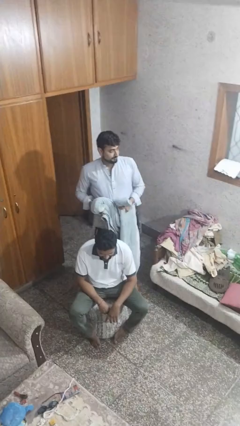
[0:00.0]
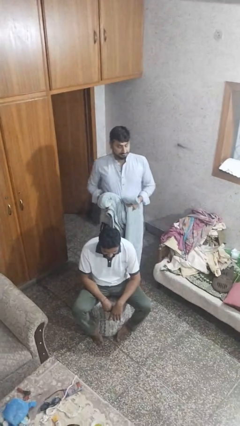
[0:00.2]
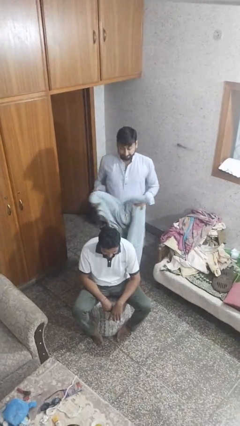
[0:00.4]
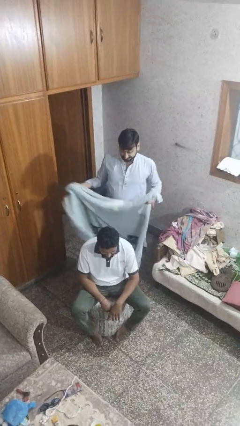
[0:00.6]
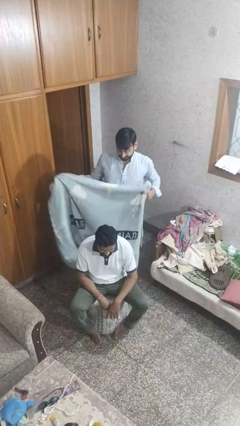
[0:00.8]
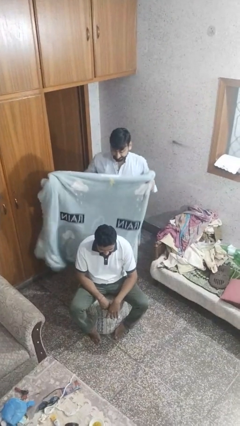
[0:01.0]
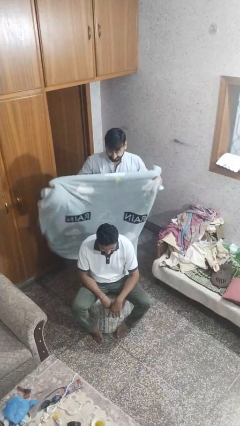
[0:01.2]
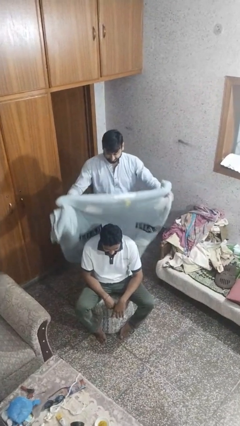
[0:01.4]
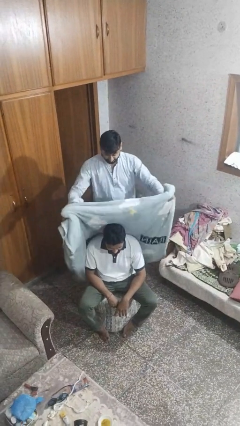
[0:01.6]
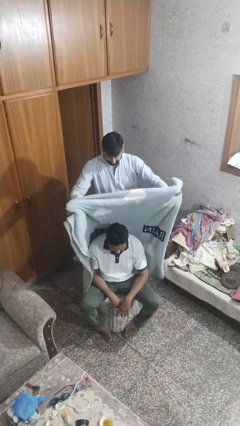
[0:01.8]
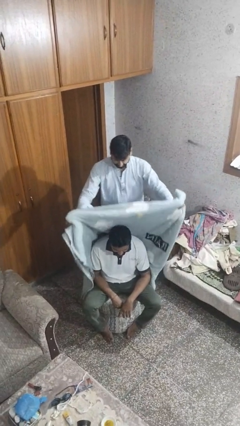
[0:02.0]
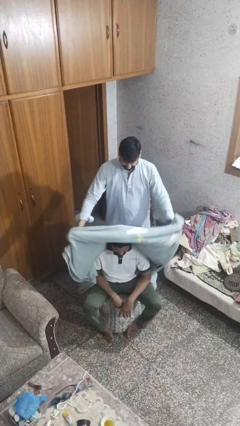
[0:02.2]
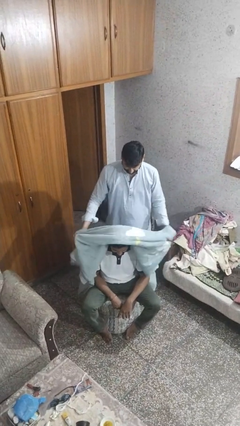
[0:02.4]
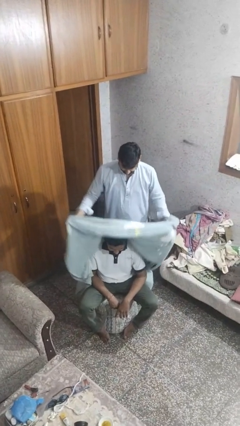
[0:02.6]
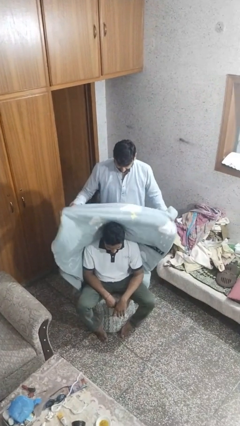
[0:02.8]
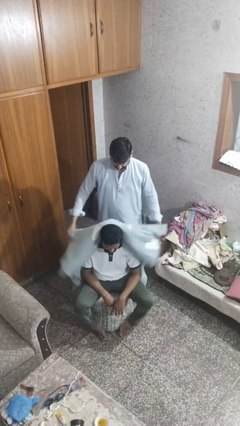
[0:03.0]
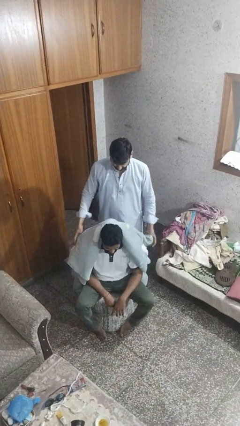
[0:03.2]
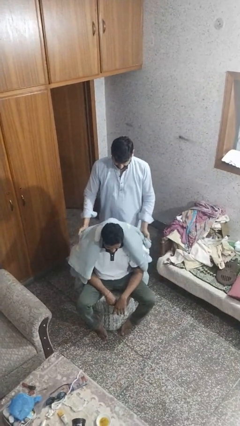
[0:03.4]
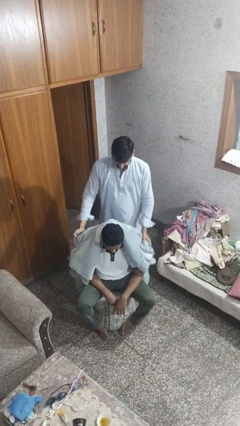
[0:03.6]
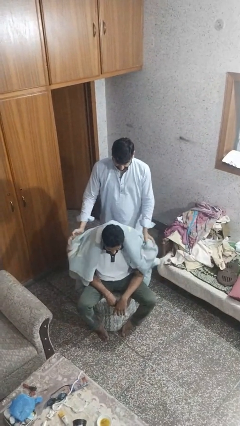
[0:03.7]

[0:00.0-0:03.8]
person covers friend with blanket

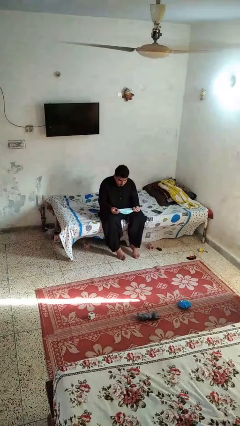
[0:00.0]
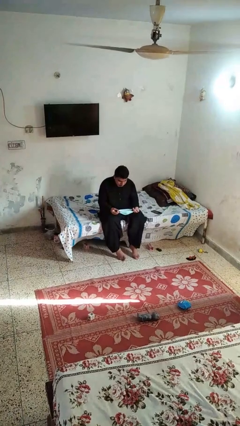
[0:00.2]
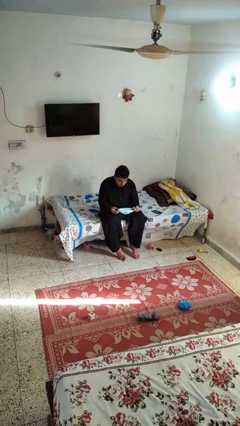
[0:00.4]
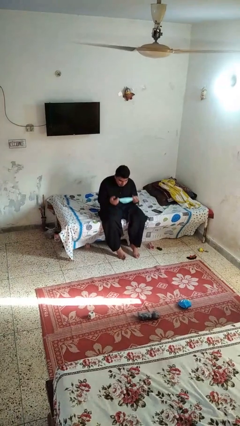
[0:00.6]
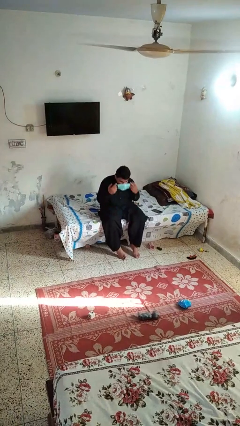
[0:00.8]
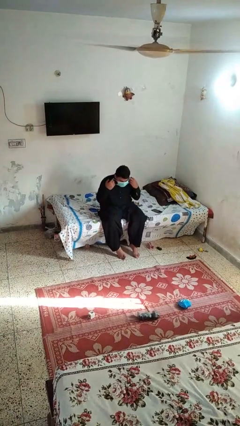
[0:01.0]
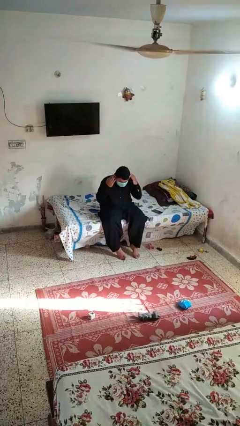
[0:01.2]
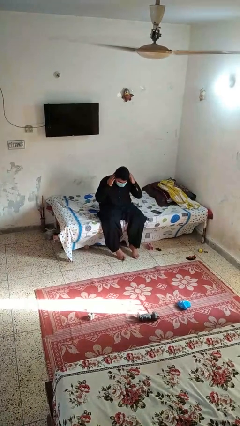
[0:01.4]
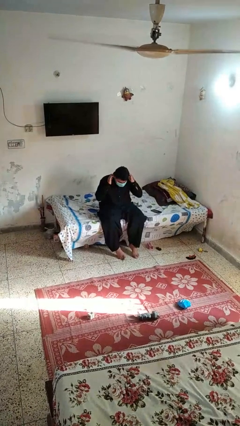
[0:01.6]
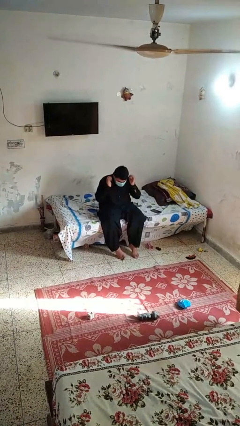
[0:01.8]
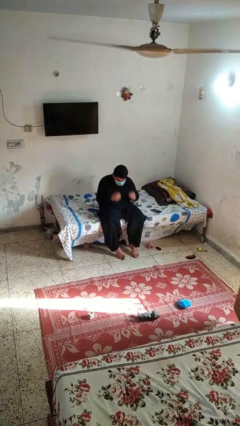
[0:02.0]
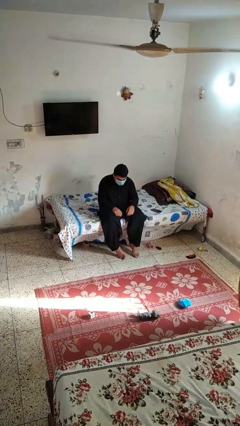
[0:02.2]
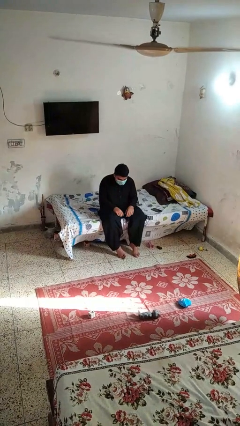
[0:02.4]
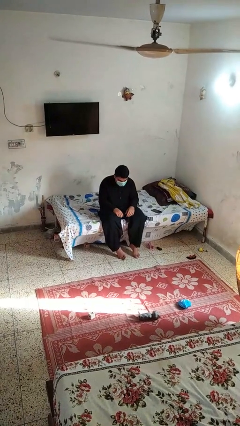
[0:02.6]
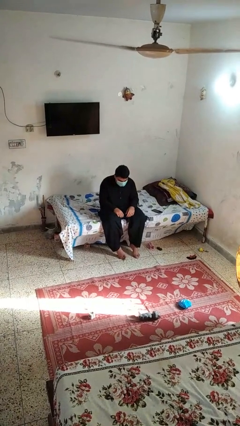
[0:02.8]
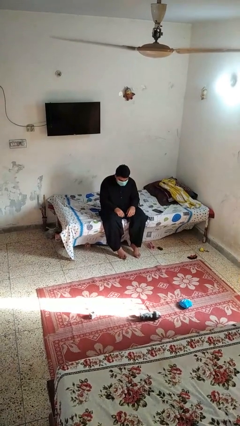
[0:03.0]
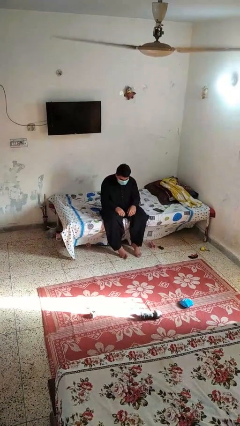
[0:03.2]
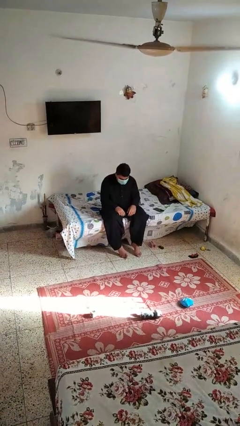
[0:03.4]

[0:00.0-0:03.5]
person puts on facemask

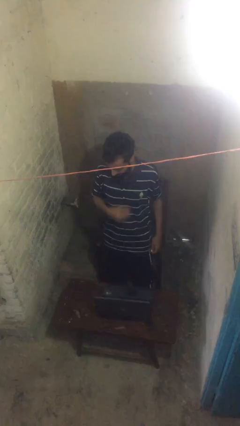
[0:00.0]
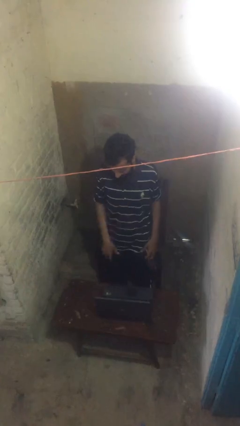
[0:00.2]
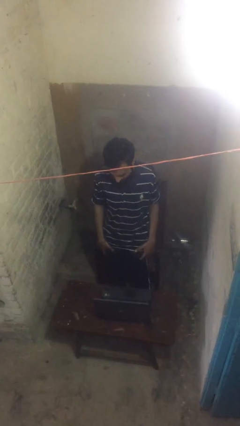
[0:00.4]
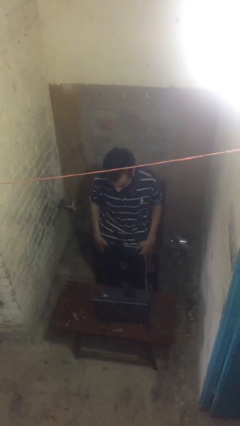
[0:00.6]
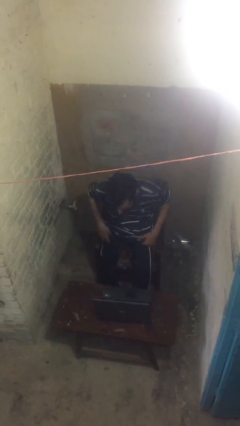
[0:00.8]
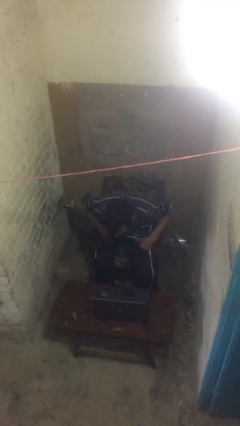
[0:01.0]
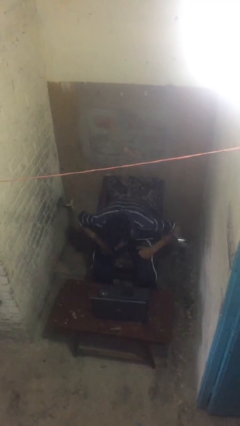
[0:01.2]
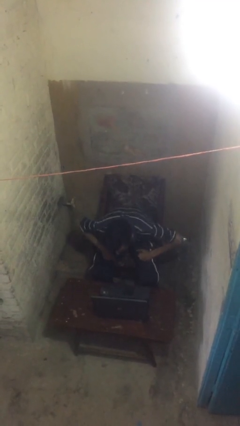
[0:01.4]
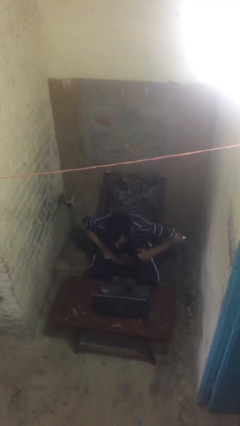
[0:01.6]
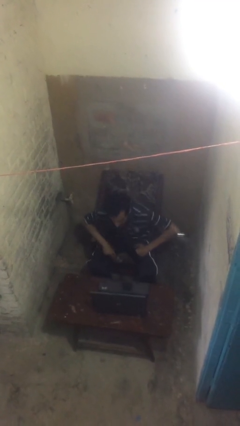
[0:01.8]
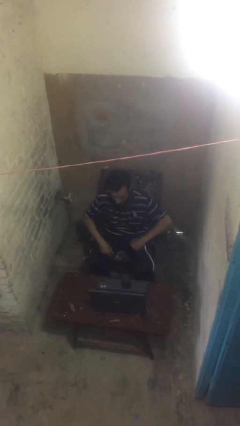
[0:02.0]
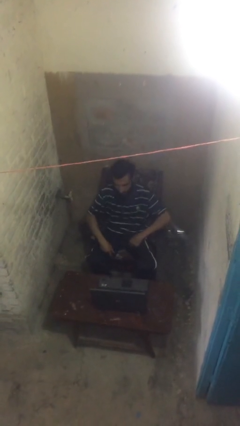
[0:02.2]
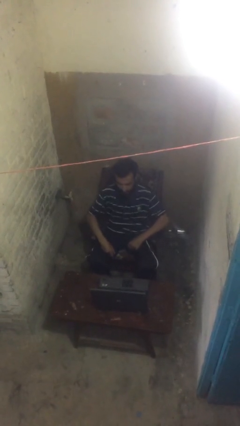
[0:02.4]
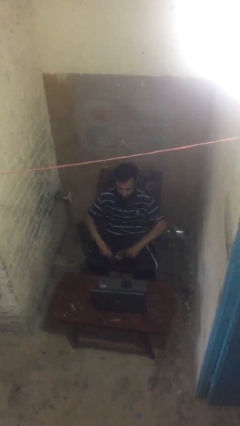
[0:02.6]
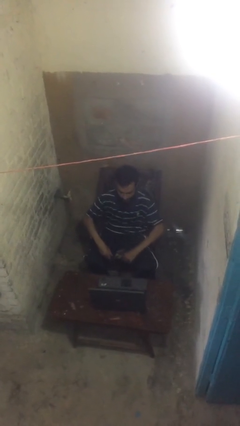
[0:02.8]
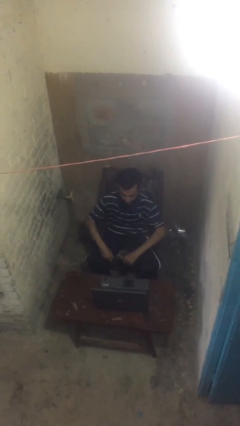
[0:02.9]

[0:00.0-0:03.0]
person sits down

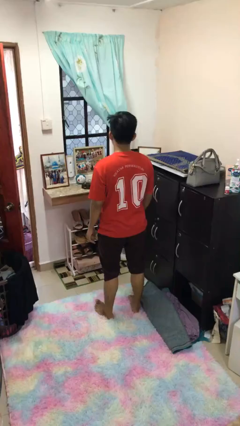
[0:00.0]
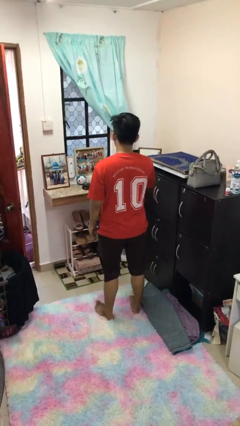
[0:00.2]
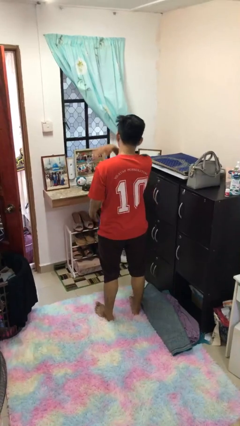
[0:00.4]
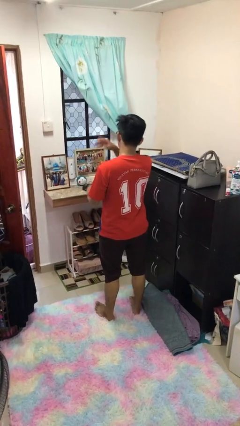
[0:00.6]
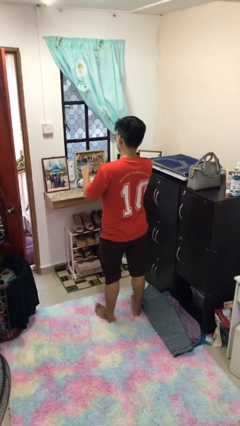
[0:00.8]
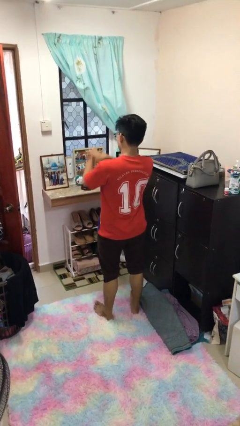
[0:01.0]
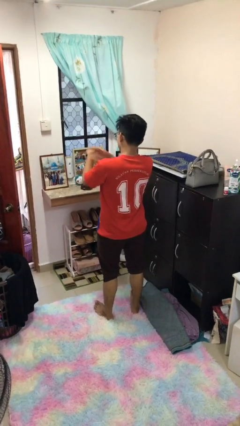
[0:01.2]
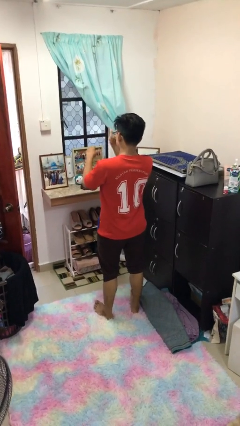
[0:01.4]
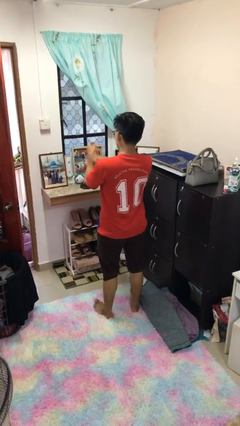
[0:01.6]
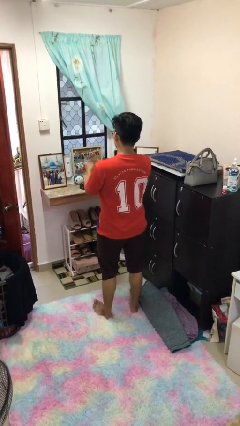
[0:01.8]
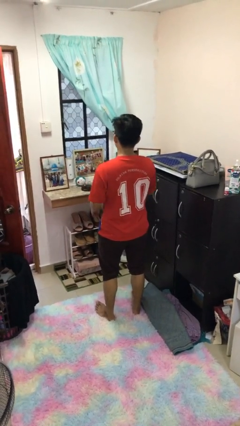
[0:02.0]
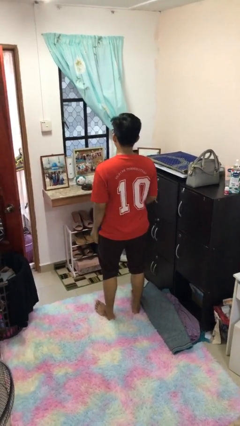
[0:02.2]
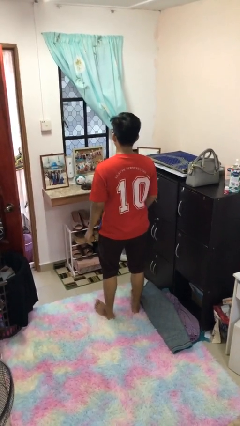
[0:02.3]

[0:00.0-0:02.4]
person swats bug

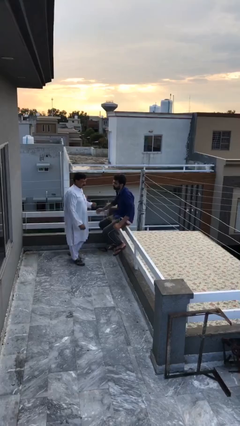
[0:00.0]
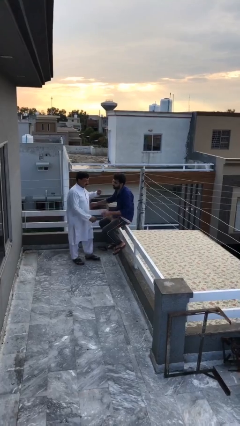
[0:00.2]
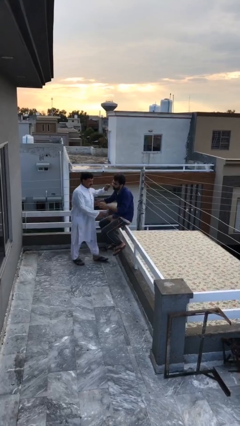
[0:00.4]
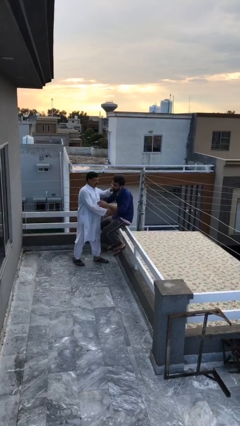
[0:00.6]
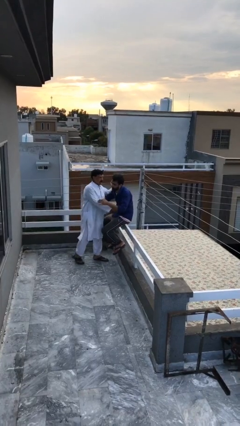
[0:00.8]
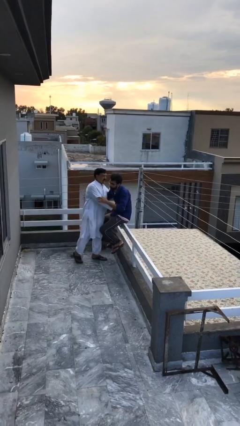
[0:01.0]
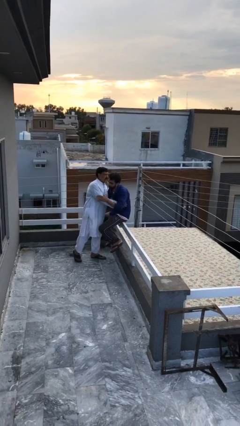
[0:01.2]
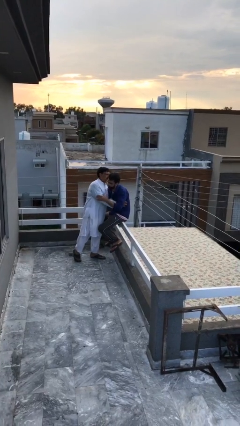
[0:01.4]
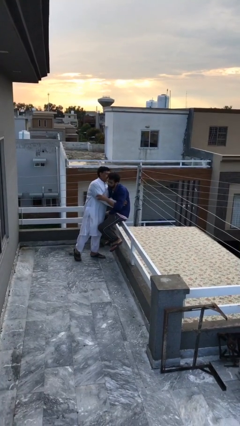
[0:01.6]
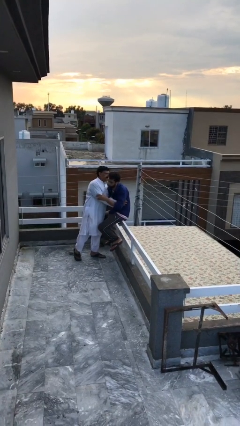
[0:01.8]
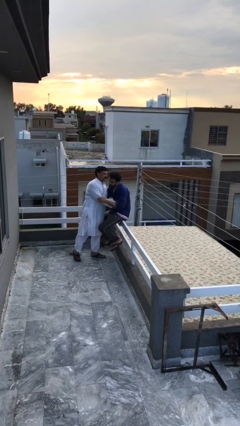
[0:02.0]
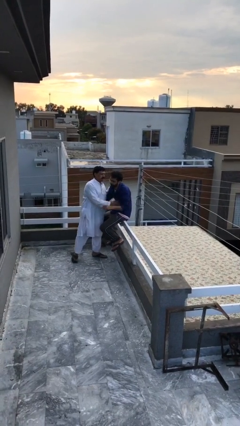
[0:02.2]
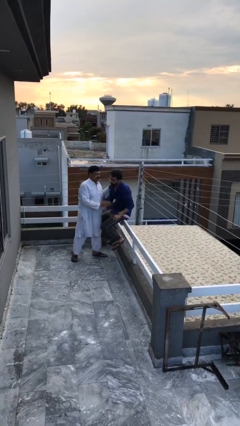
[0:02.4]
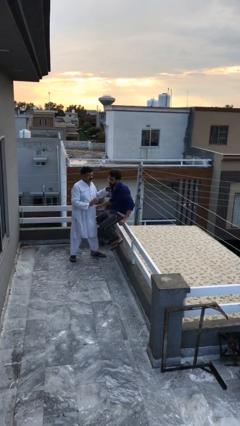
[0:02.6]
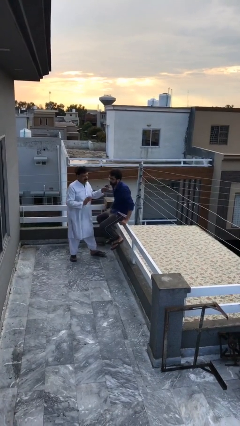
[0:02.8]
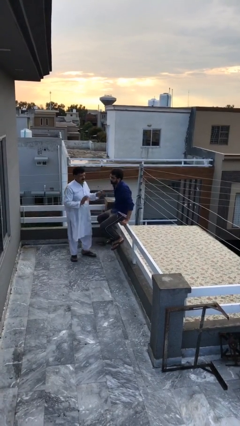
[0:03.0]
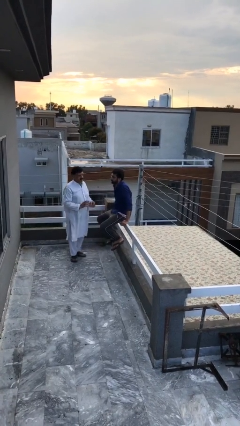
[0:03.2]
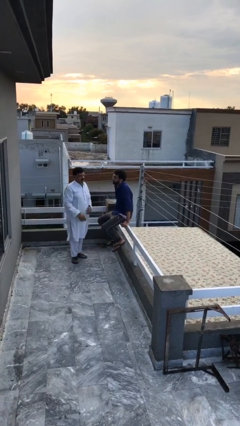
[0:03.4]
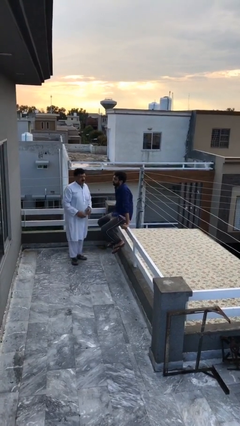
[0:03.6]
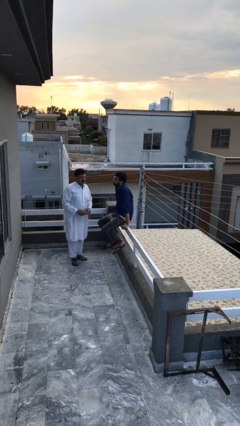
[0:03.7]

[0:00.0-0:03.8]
person embraces person

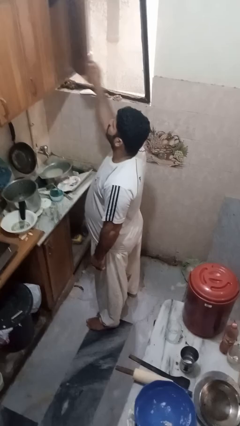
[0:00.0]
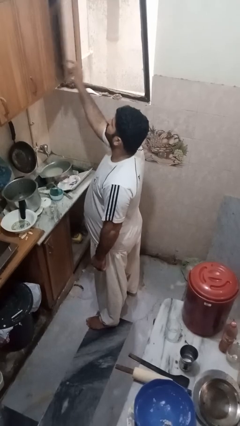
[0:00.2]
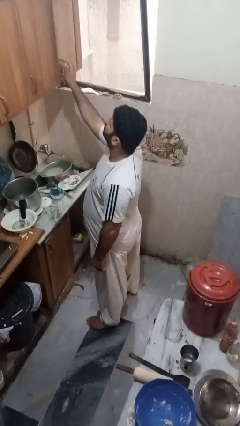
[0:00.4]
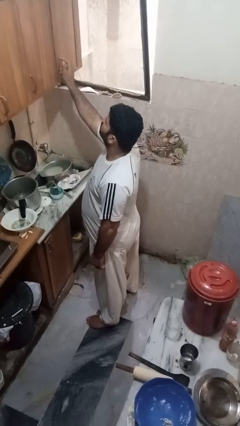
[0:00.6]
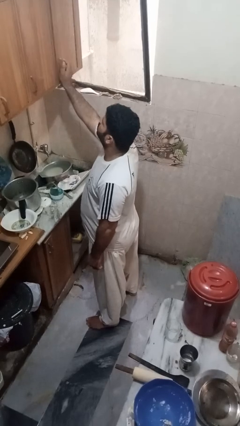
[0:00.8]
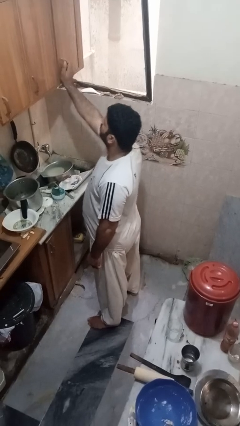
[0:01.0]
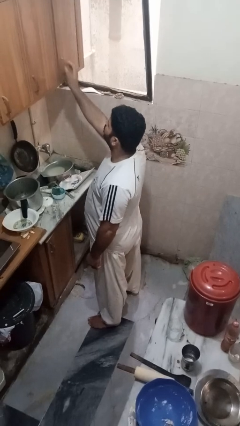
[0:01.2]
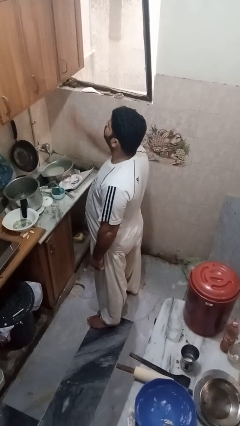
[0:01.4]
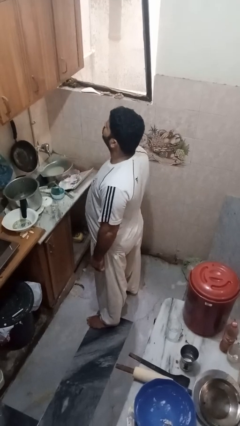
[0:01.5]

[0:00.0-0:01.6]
person closes cabinet
